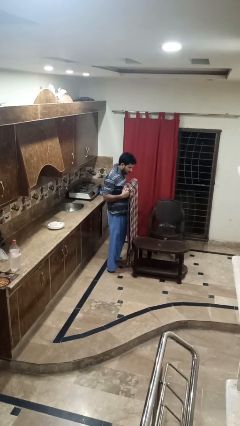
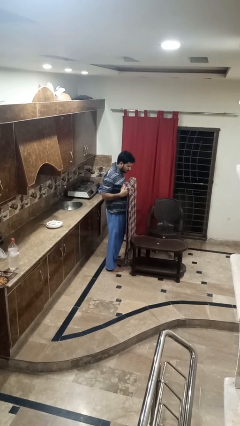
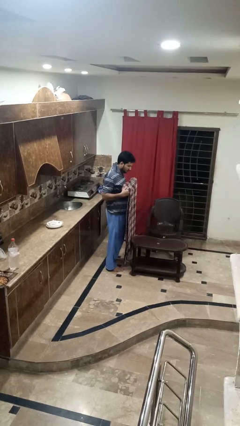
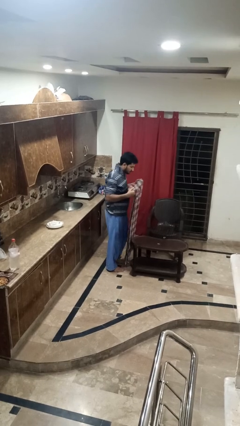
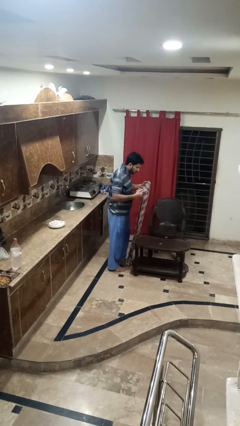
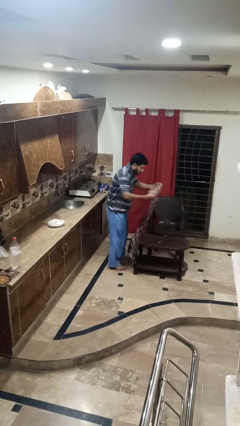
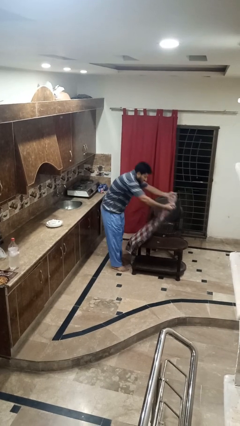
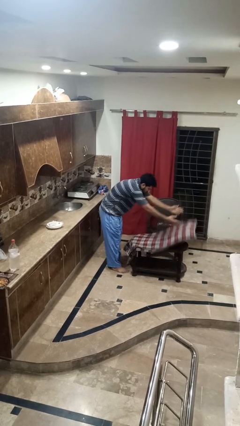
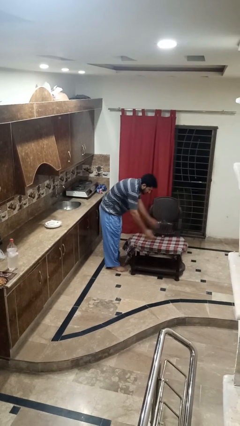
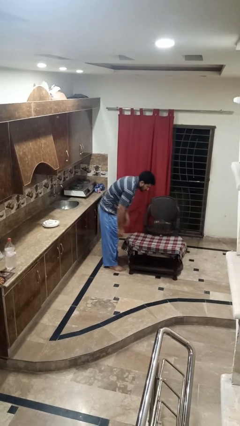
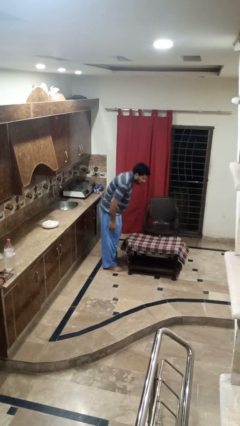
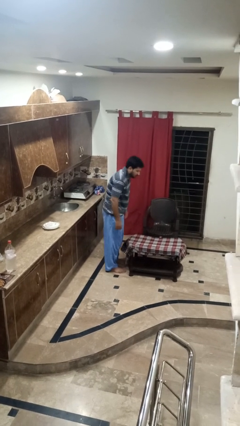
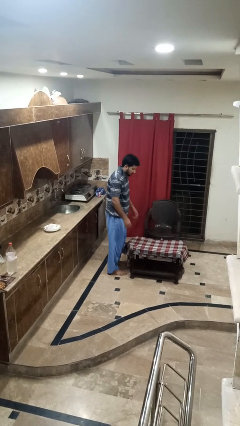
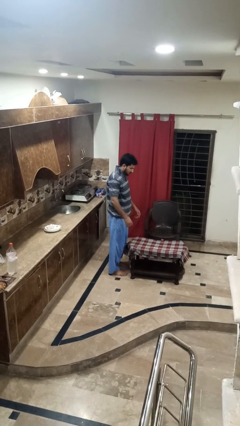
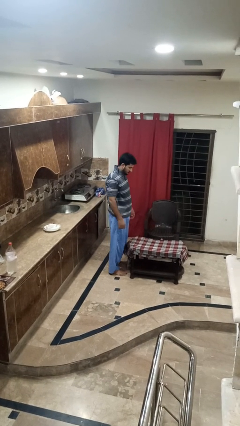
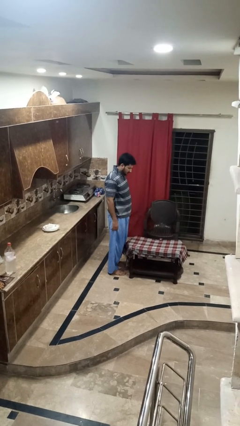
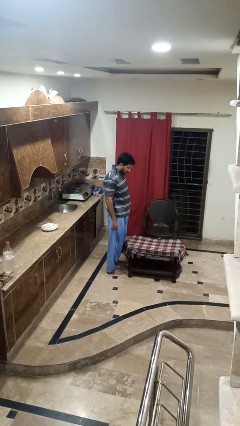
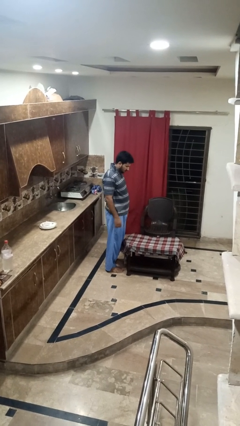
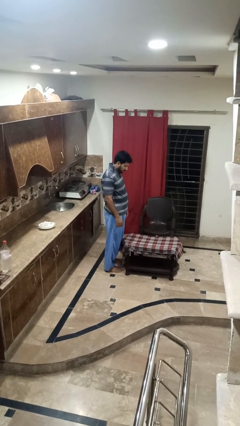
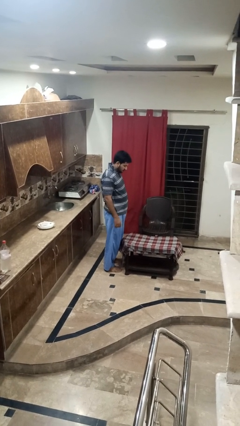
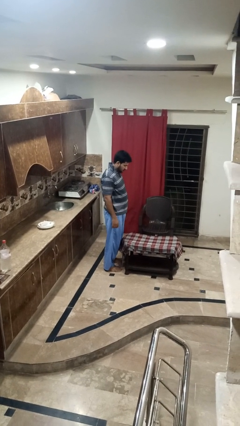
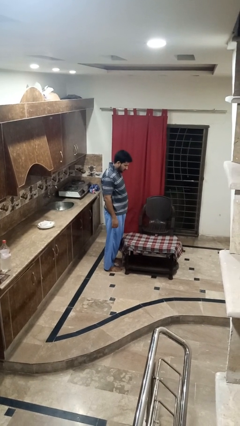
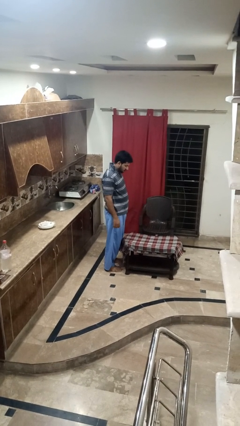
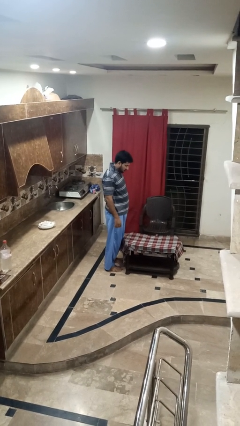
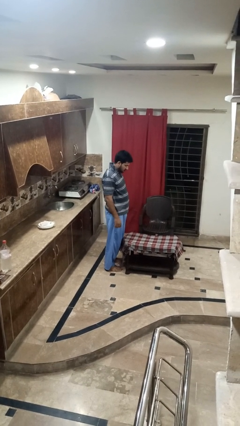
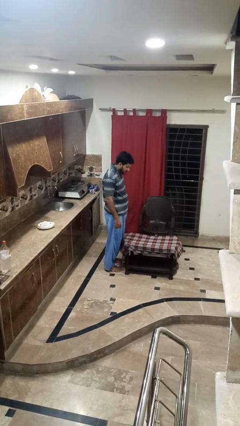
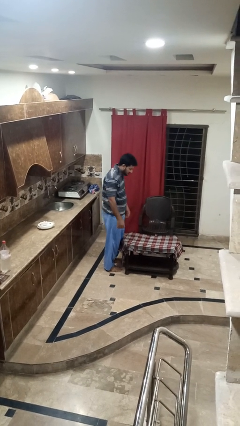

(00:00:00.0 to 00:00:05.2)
person spreads tablecloth

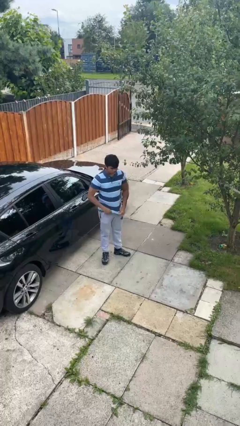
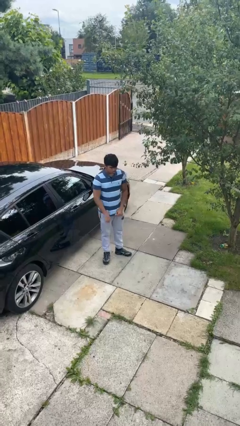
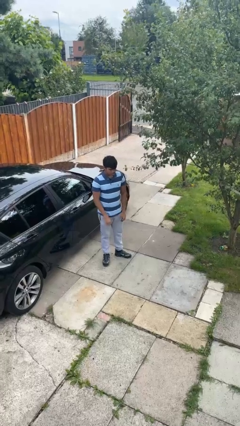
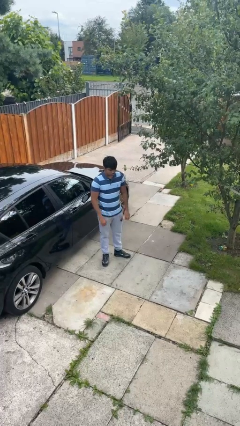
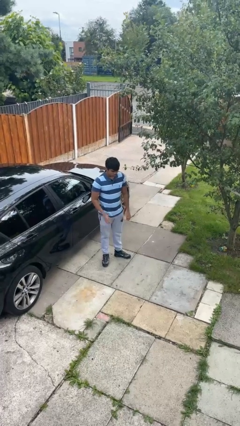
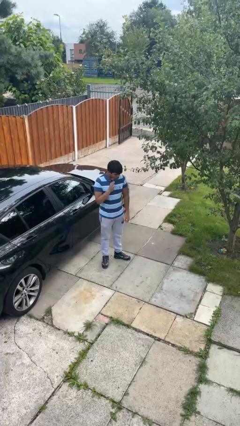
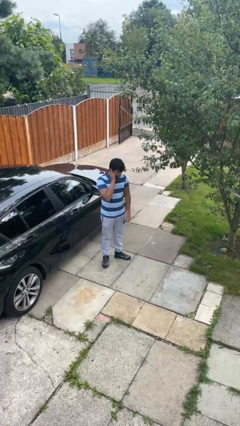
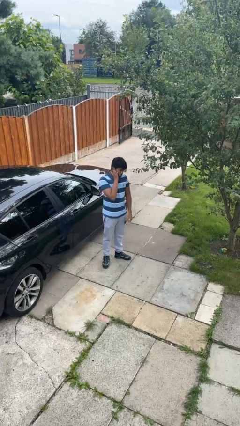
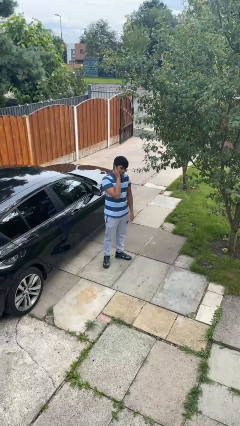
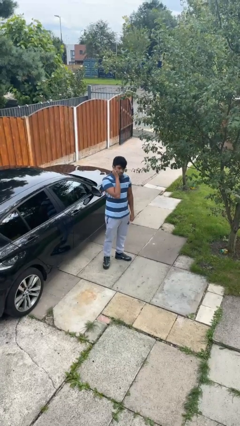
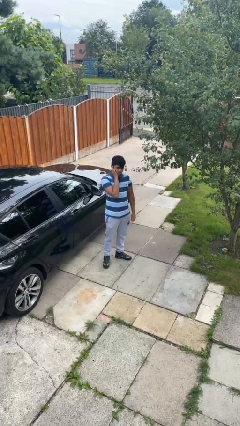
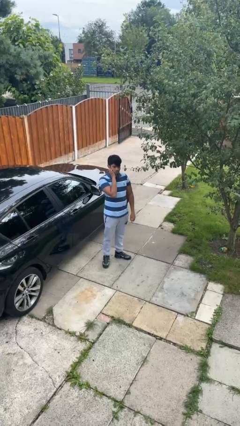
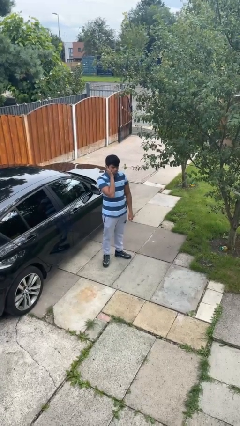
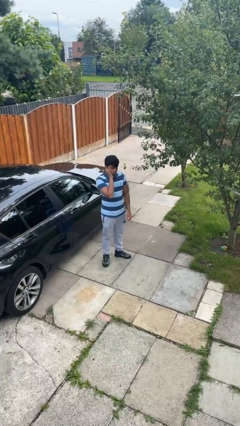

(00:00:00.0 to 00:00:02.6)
person puts fingers in ear

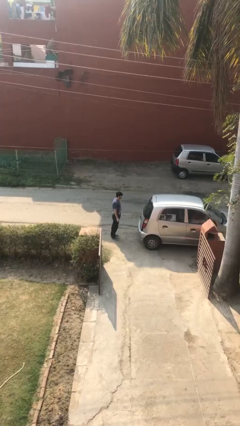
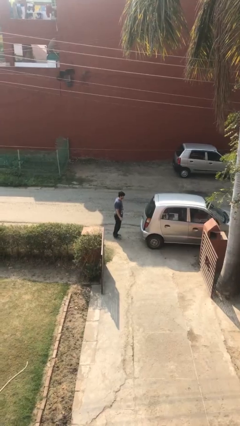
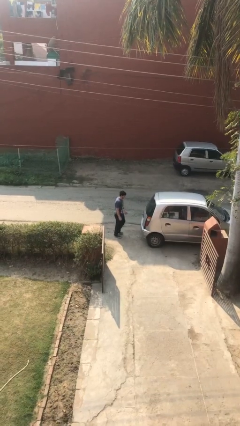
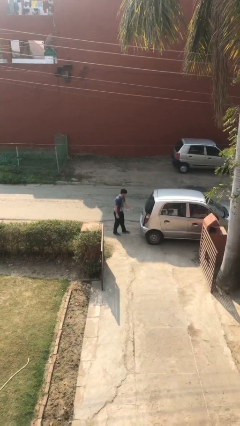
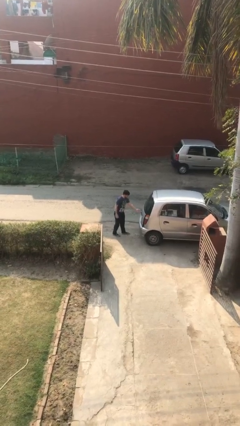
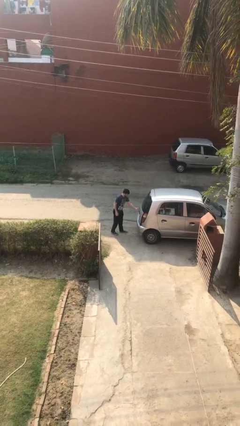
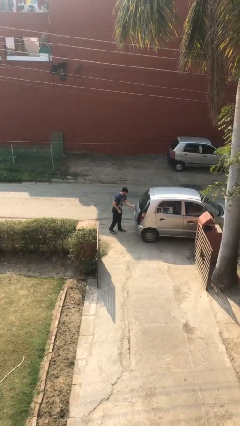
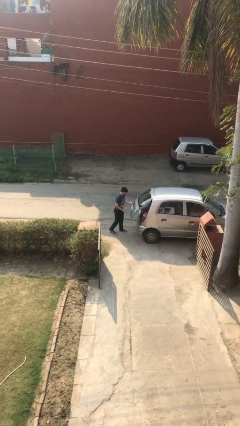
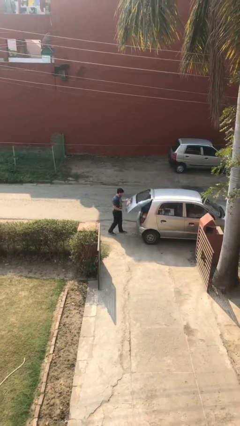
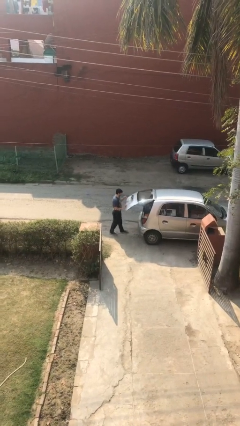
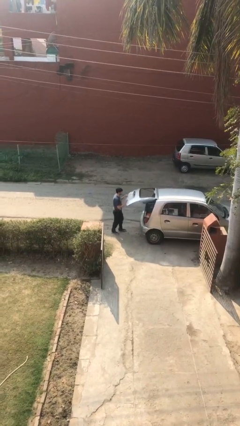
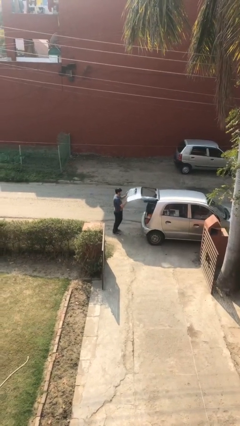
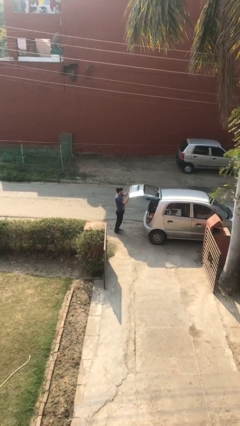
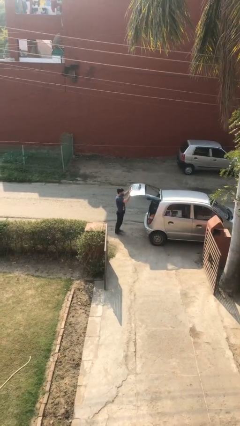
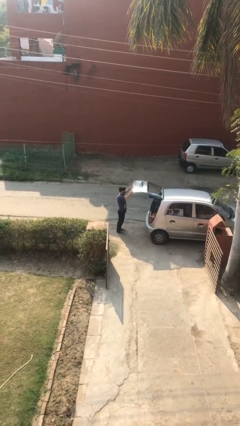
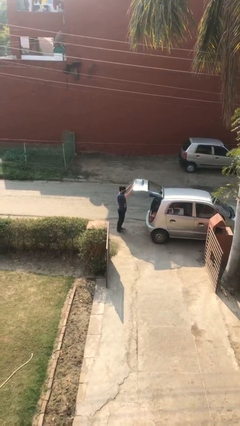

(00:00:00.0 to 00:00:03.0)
person opens car trunk

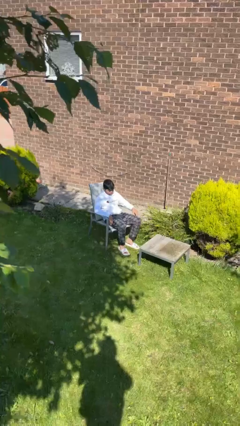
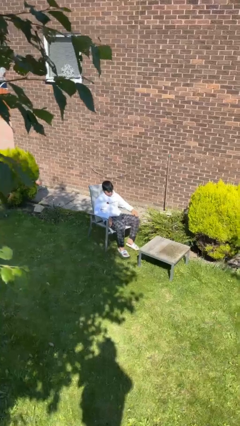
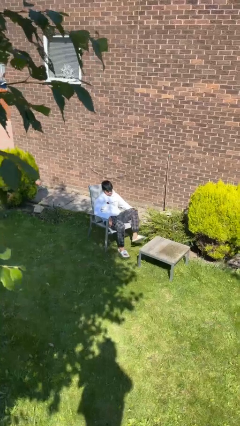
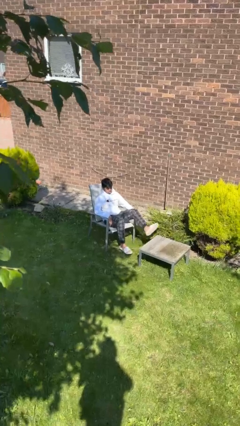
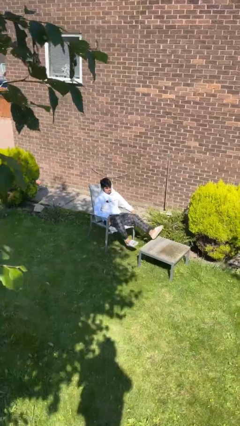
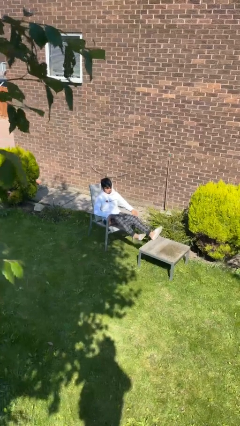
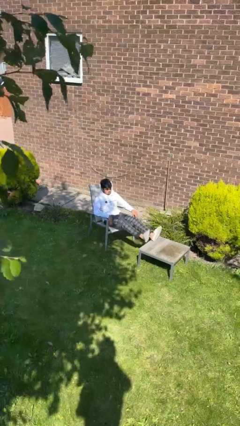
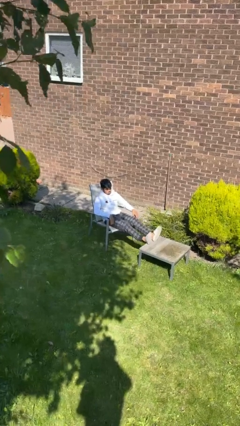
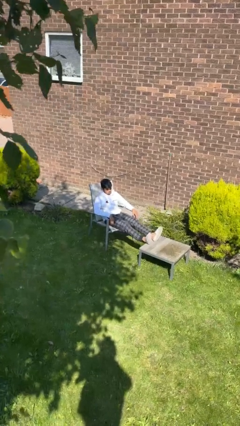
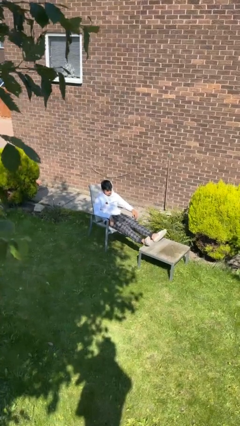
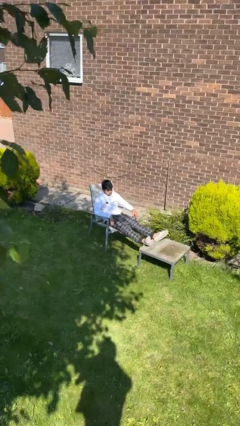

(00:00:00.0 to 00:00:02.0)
person puts feet up

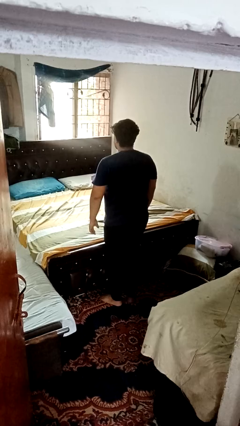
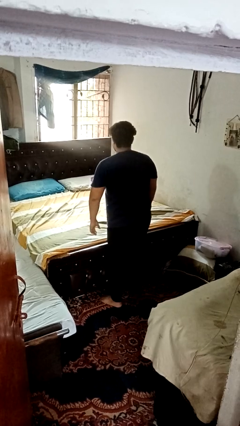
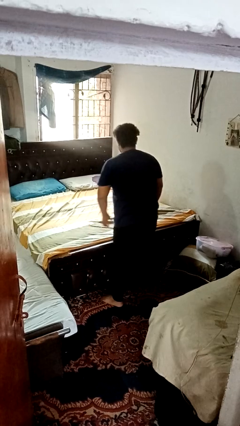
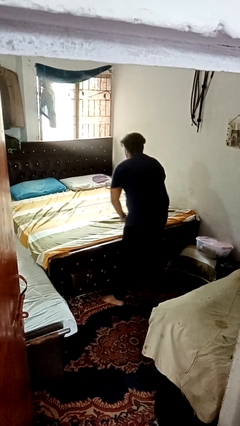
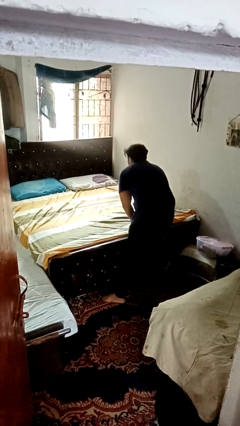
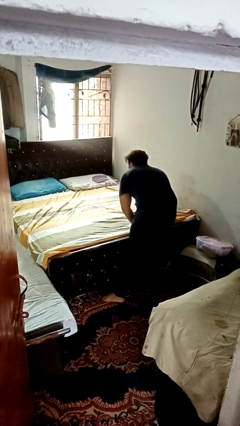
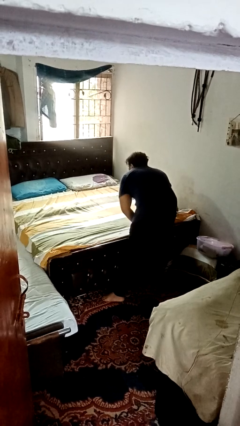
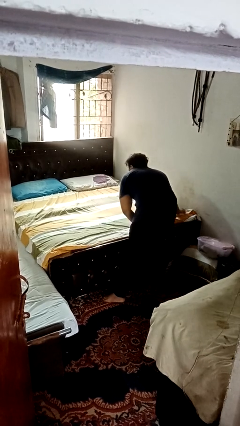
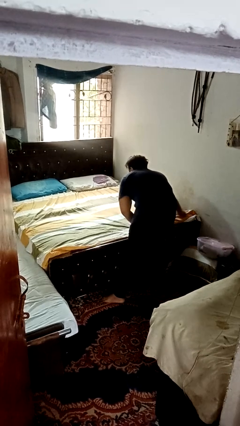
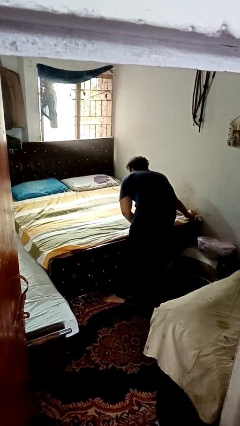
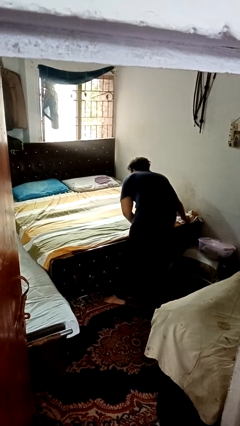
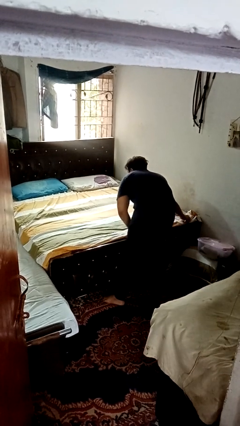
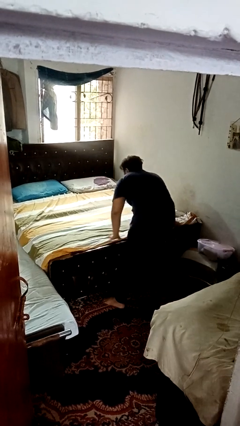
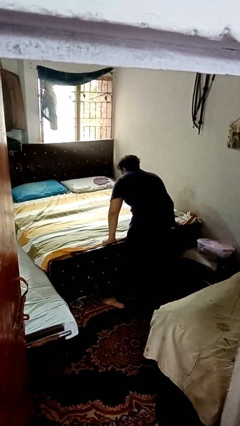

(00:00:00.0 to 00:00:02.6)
person makes bed

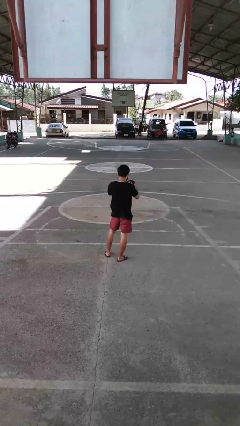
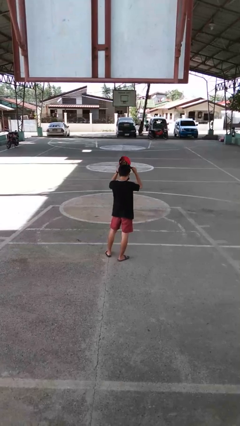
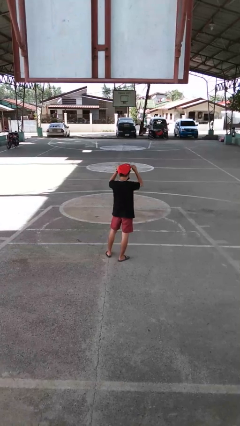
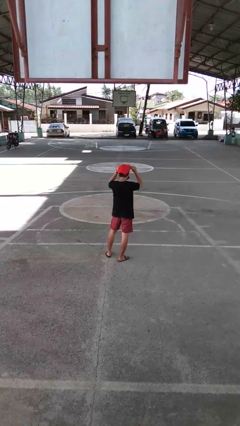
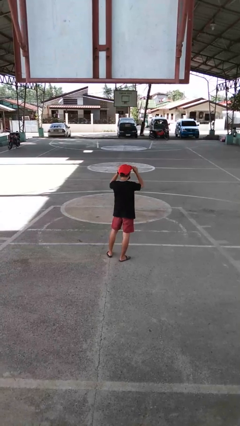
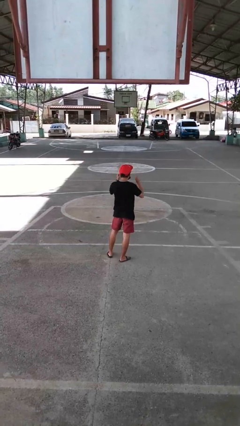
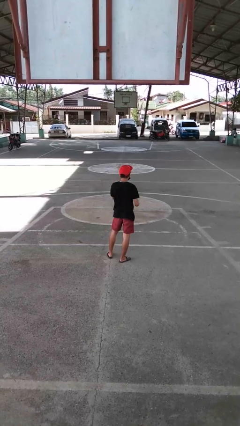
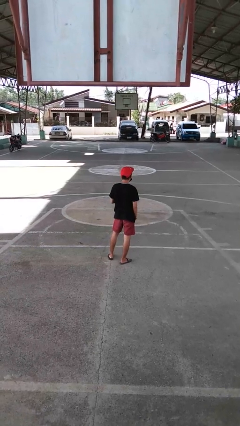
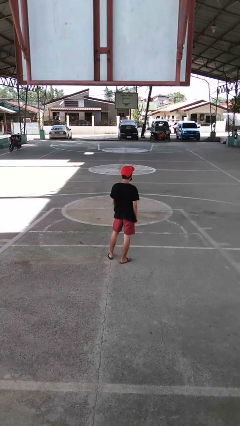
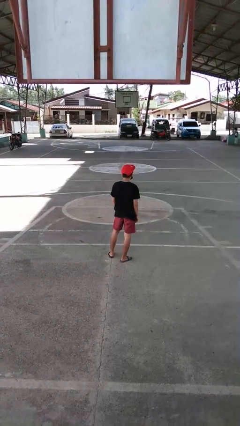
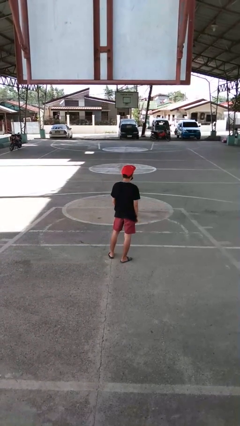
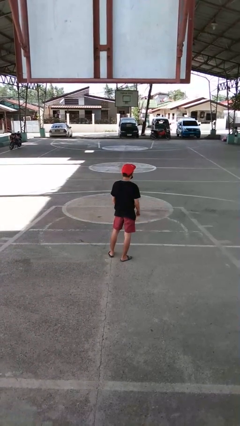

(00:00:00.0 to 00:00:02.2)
person puts on hat
